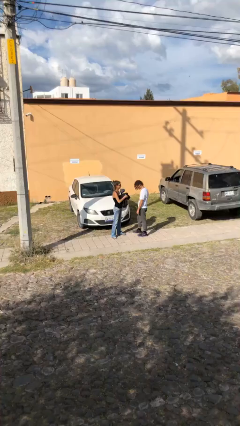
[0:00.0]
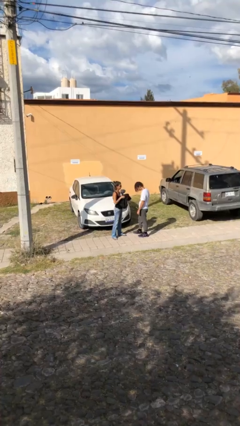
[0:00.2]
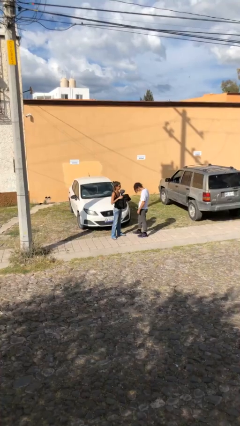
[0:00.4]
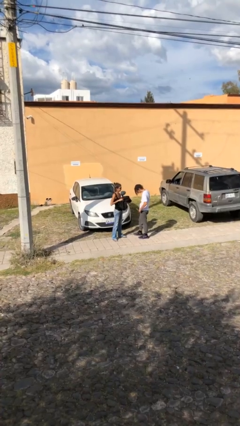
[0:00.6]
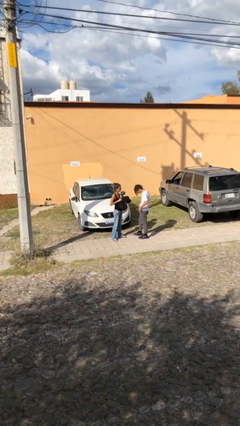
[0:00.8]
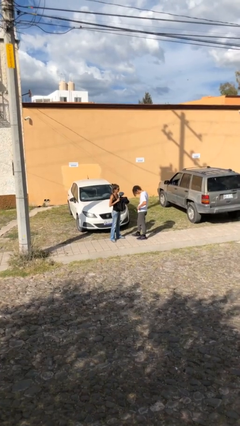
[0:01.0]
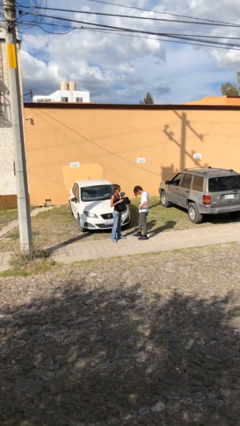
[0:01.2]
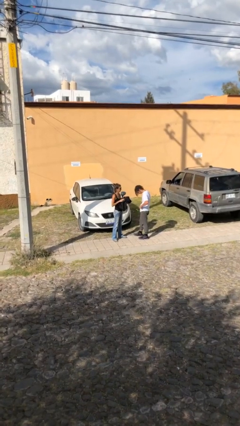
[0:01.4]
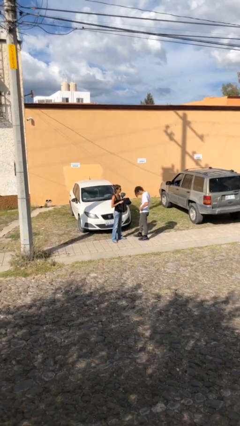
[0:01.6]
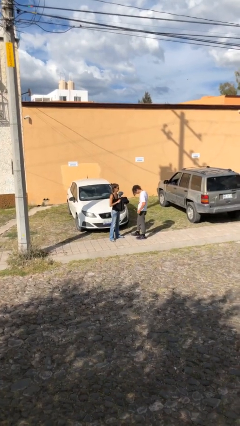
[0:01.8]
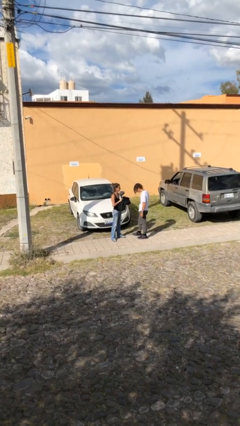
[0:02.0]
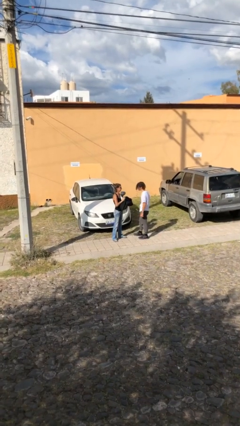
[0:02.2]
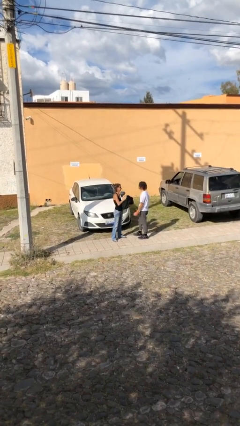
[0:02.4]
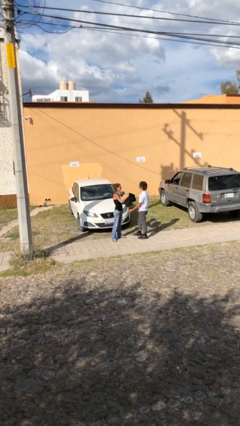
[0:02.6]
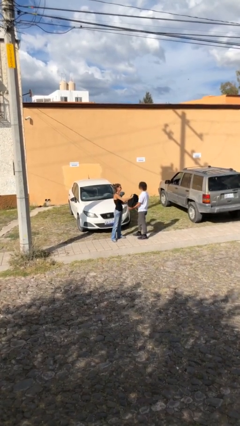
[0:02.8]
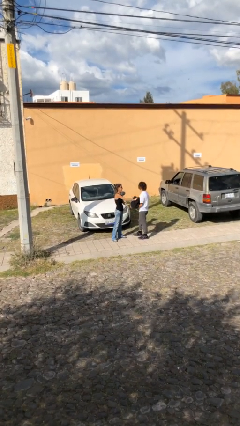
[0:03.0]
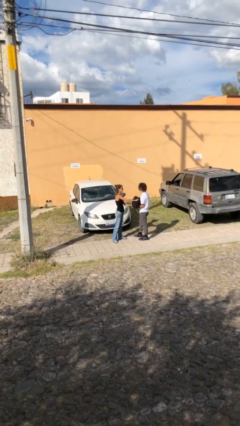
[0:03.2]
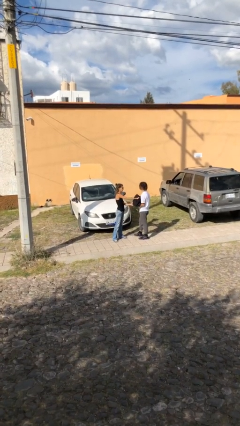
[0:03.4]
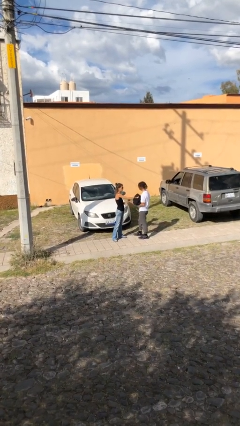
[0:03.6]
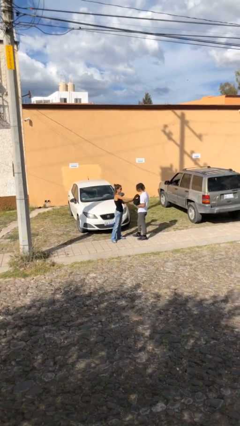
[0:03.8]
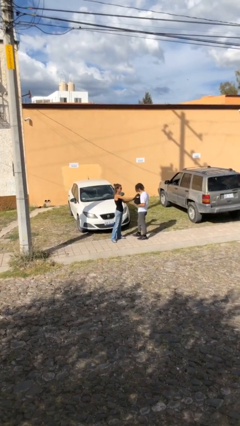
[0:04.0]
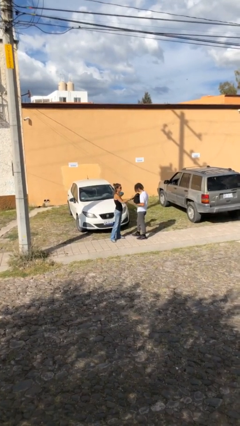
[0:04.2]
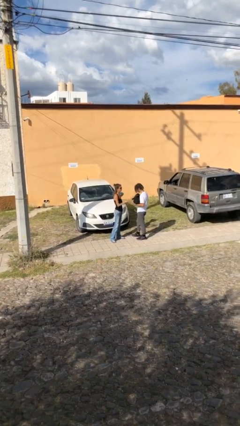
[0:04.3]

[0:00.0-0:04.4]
person transfers object to person

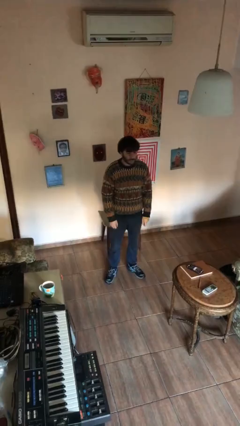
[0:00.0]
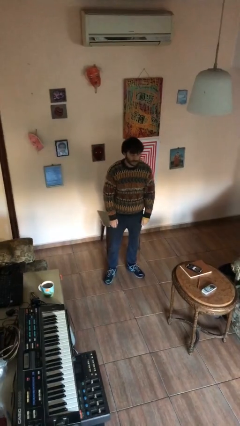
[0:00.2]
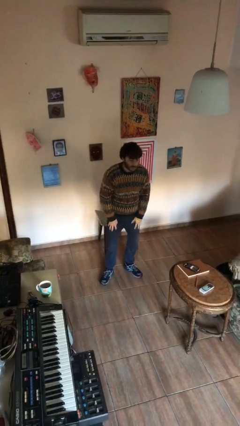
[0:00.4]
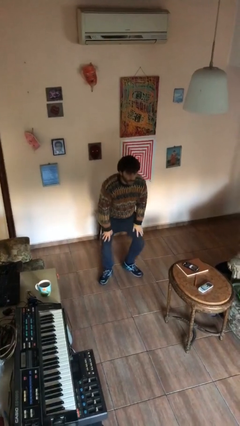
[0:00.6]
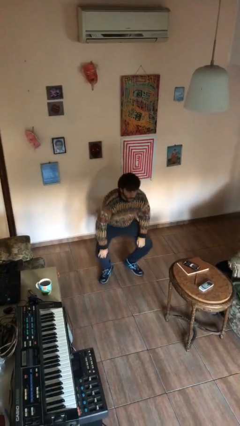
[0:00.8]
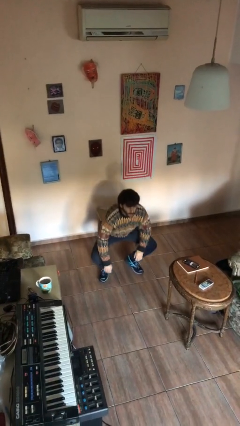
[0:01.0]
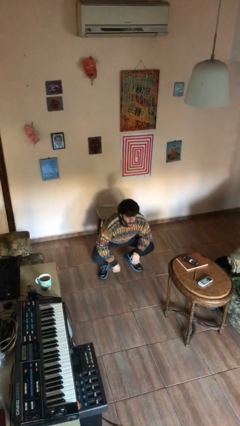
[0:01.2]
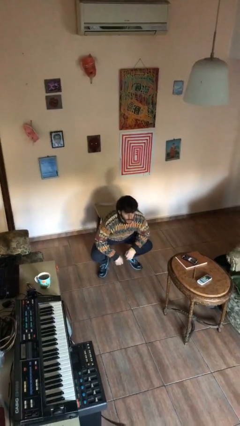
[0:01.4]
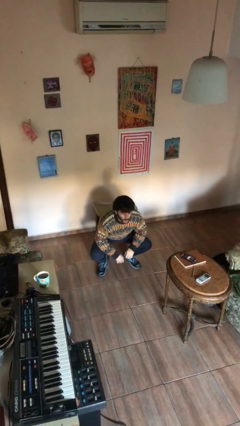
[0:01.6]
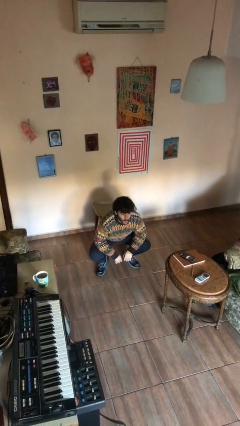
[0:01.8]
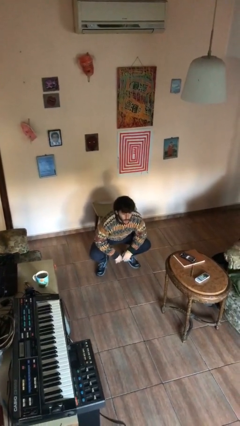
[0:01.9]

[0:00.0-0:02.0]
person squats

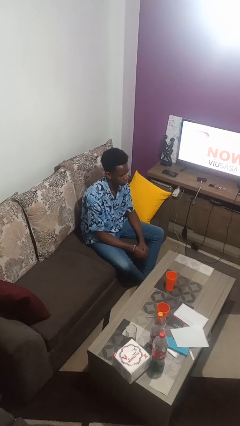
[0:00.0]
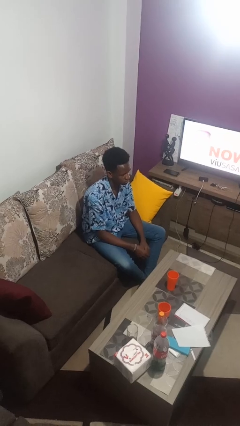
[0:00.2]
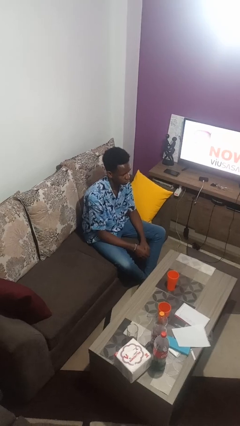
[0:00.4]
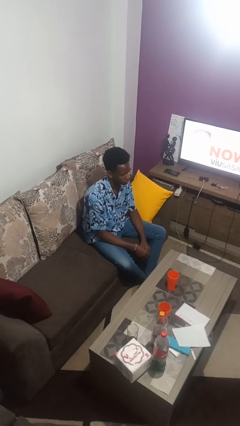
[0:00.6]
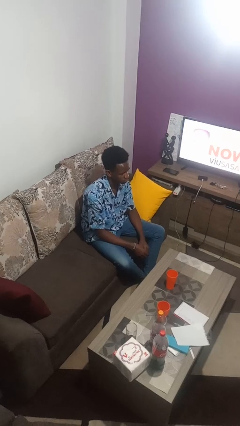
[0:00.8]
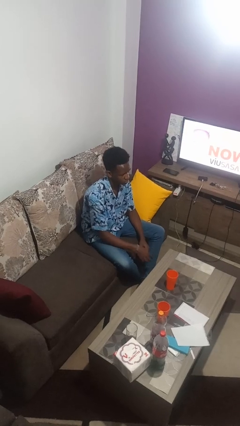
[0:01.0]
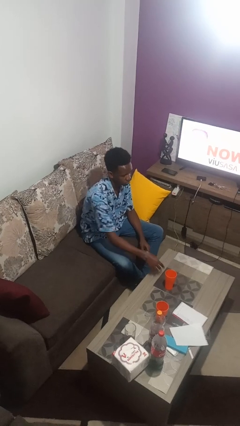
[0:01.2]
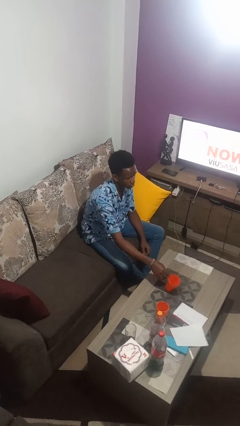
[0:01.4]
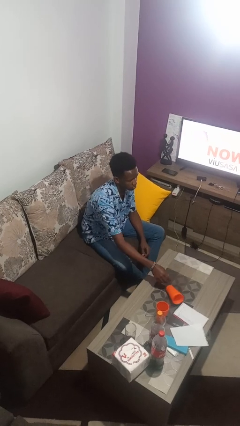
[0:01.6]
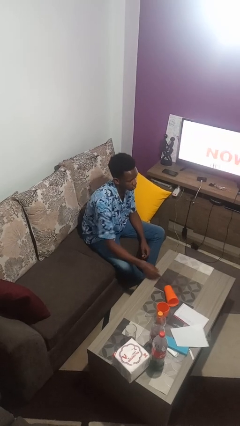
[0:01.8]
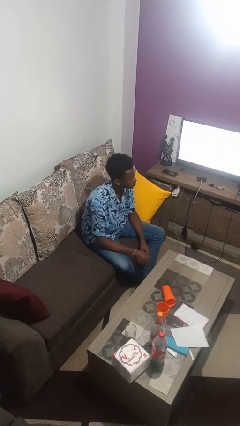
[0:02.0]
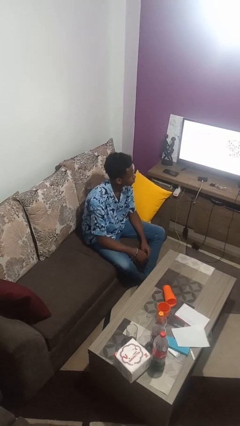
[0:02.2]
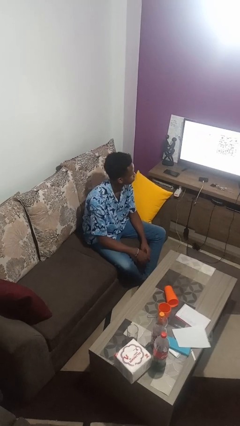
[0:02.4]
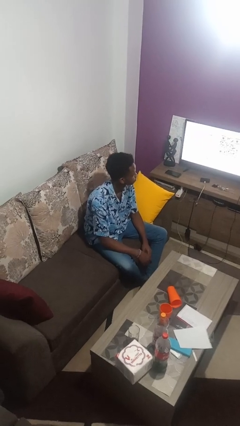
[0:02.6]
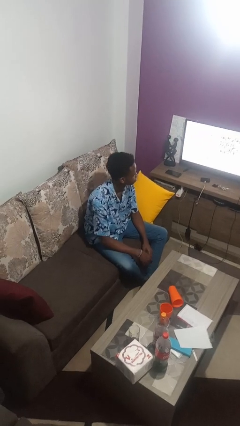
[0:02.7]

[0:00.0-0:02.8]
person knocks over glass

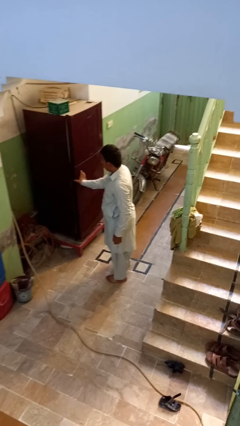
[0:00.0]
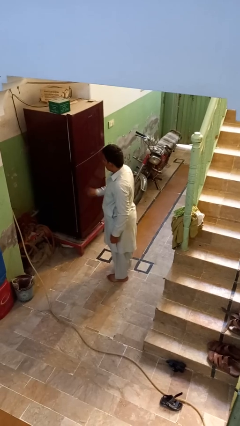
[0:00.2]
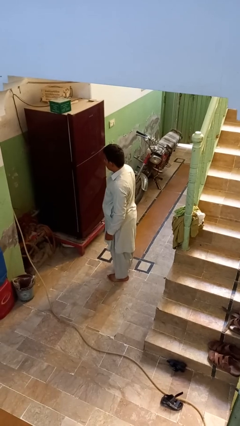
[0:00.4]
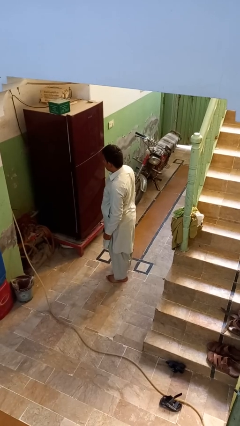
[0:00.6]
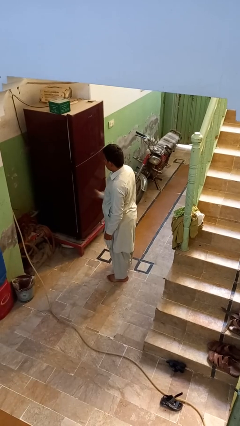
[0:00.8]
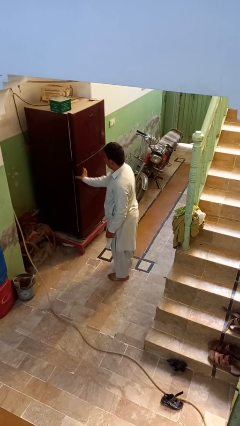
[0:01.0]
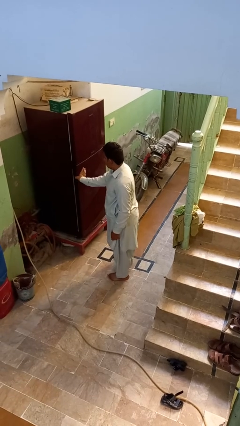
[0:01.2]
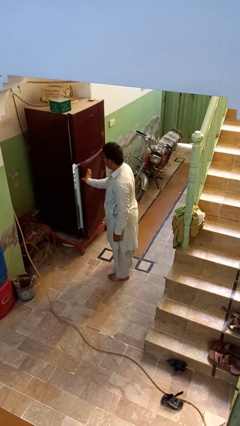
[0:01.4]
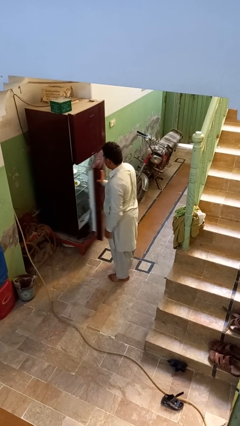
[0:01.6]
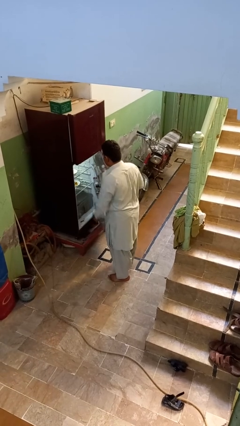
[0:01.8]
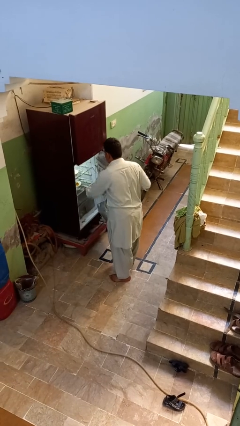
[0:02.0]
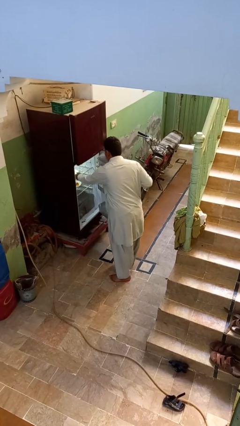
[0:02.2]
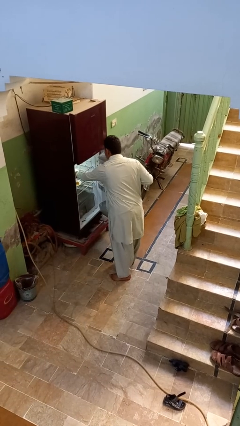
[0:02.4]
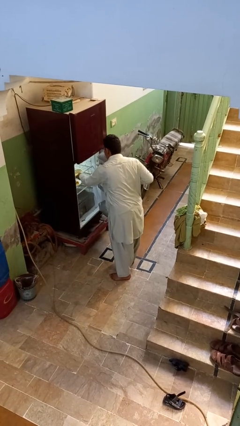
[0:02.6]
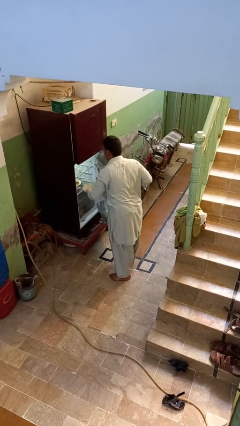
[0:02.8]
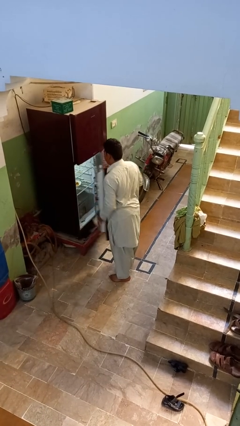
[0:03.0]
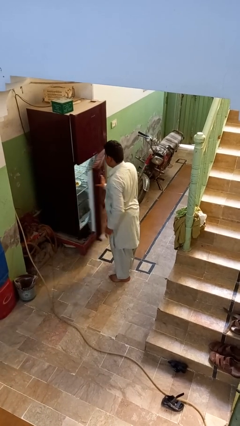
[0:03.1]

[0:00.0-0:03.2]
person takes object from refrigerator

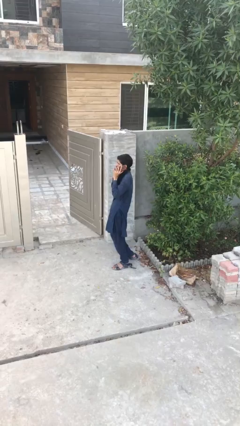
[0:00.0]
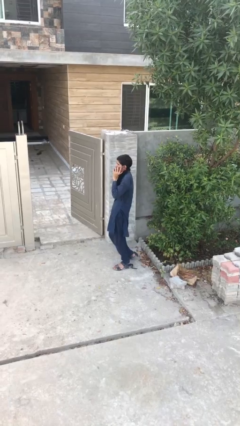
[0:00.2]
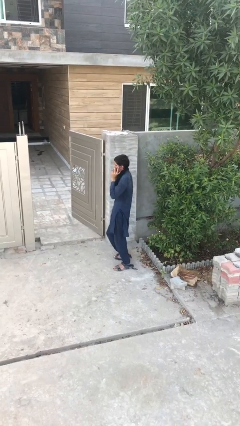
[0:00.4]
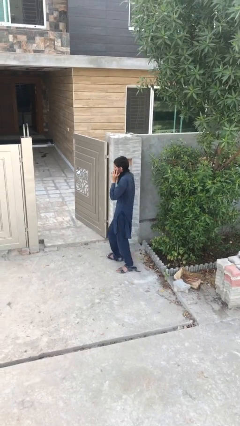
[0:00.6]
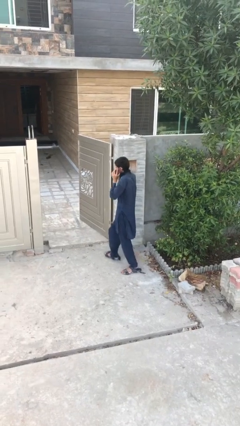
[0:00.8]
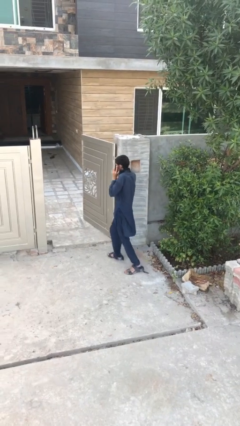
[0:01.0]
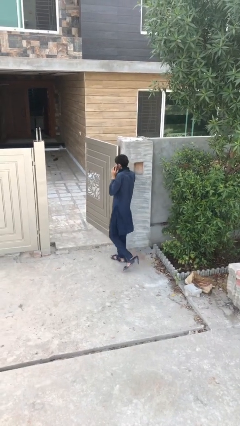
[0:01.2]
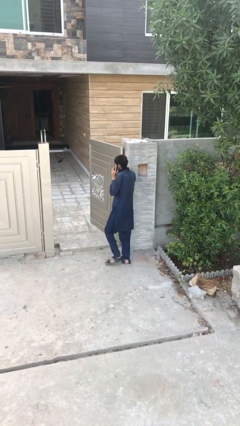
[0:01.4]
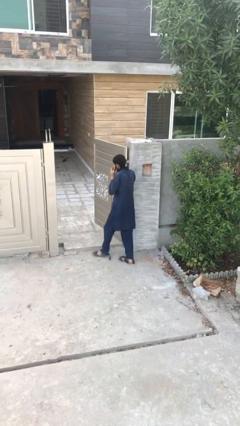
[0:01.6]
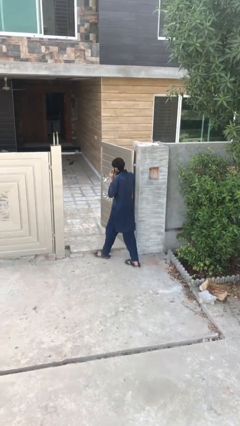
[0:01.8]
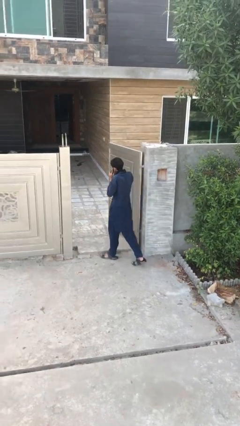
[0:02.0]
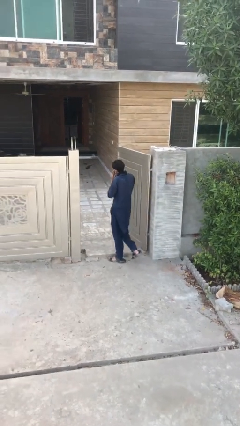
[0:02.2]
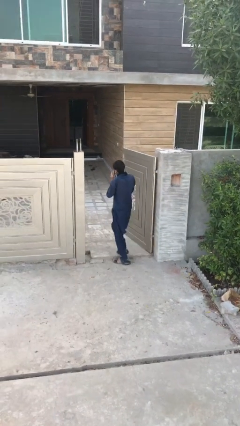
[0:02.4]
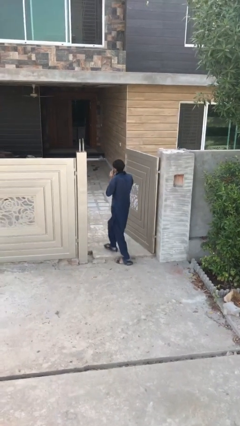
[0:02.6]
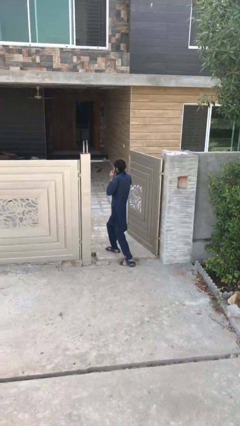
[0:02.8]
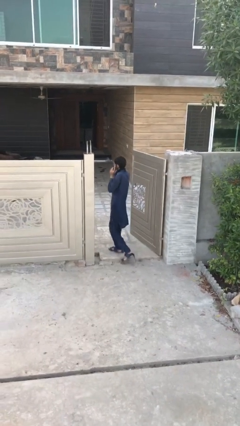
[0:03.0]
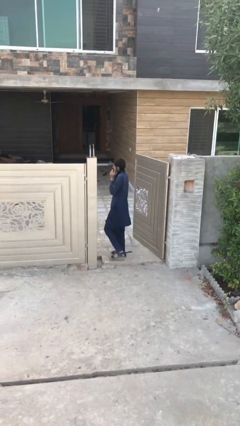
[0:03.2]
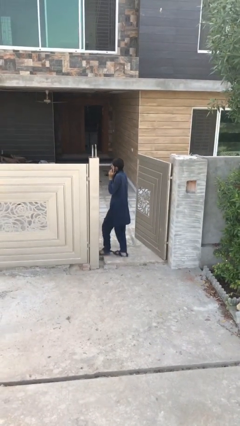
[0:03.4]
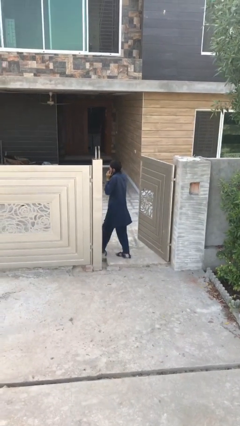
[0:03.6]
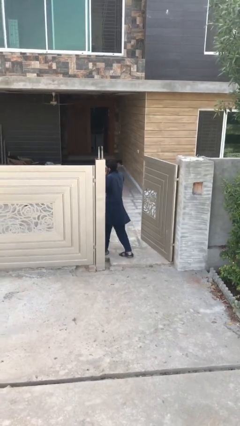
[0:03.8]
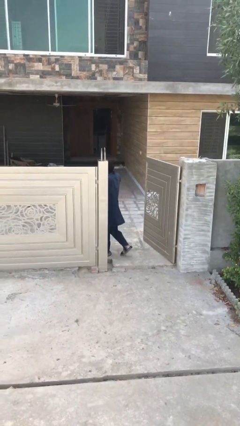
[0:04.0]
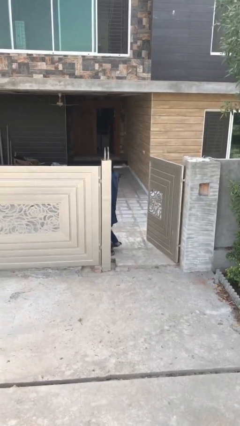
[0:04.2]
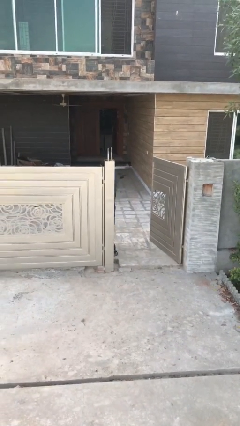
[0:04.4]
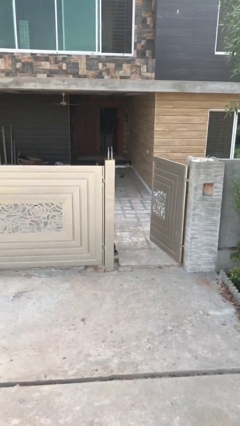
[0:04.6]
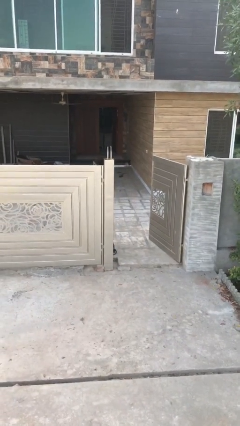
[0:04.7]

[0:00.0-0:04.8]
person exits scene through structure
